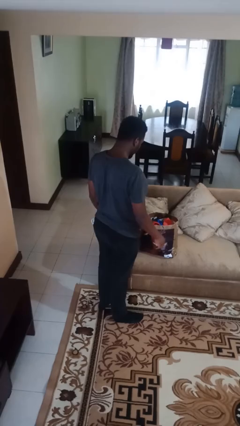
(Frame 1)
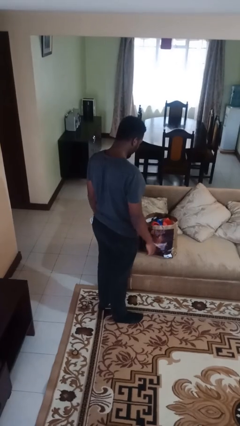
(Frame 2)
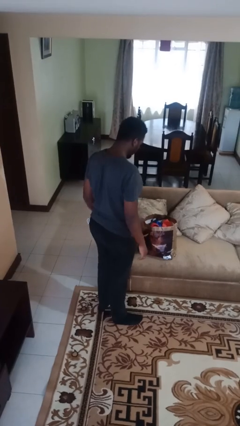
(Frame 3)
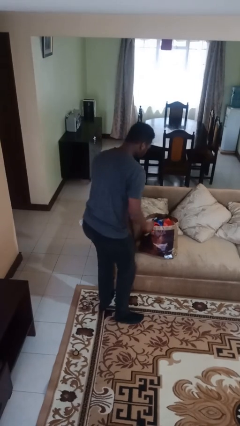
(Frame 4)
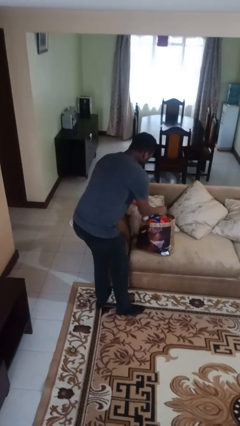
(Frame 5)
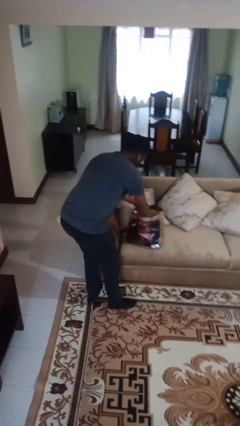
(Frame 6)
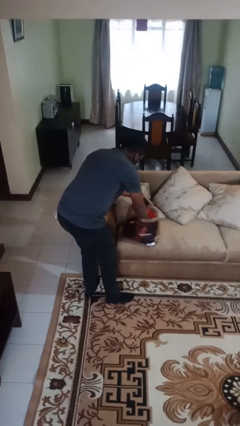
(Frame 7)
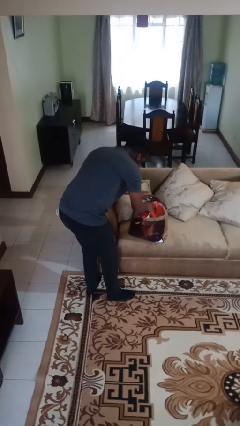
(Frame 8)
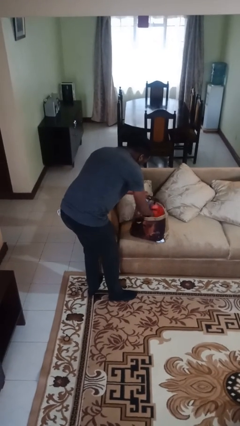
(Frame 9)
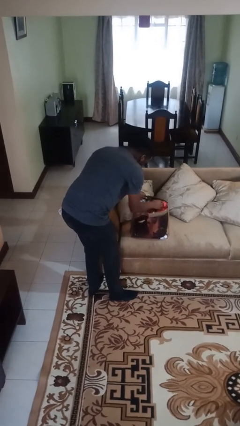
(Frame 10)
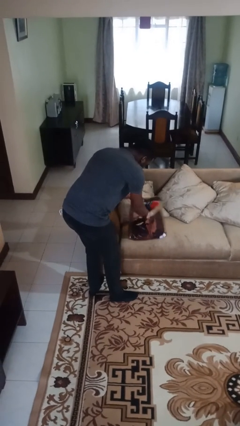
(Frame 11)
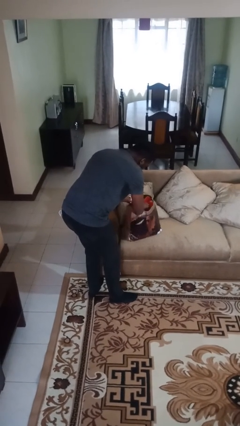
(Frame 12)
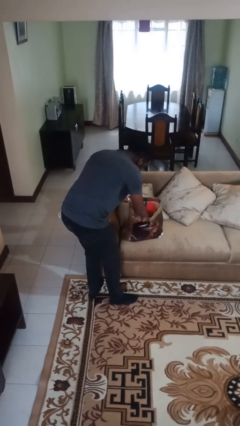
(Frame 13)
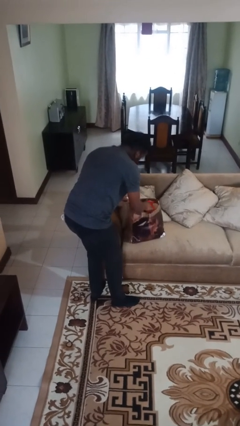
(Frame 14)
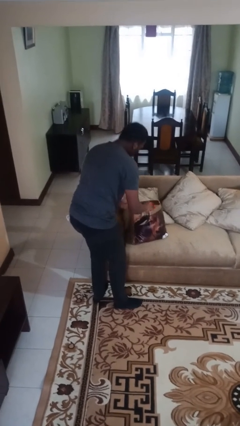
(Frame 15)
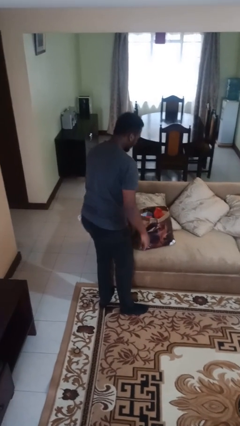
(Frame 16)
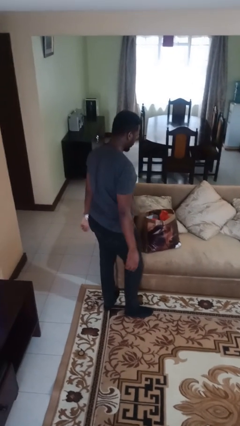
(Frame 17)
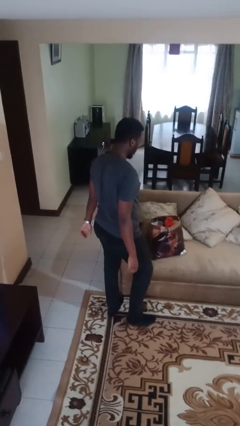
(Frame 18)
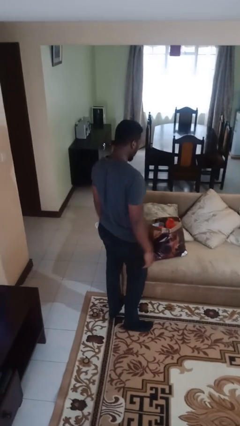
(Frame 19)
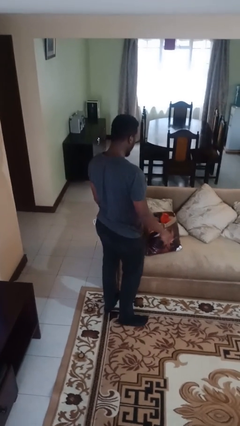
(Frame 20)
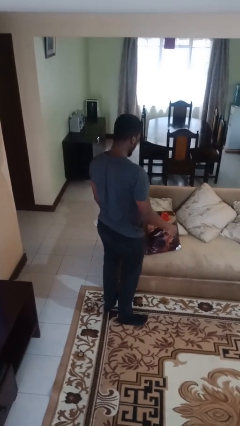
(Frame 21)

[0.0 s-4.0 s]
person searches in bag

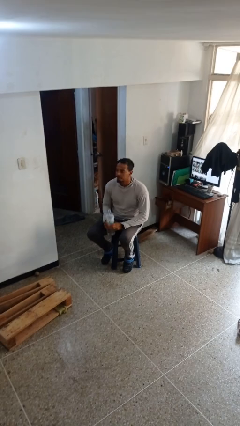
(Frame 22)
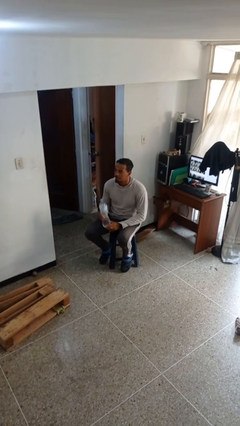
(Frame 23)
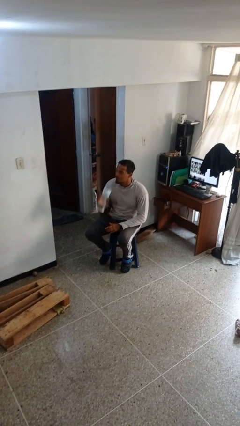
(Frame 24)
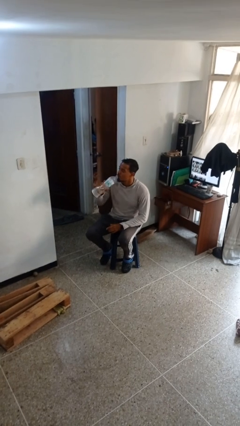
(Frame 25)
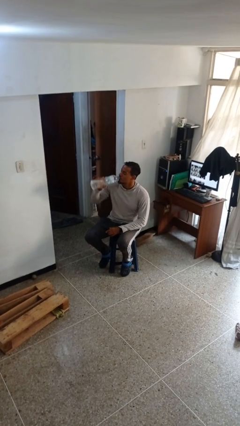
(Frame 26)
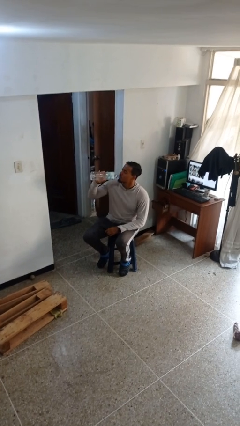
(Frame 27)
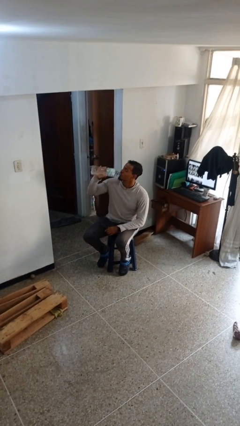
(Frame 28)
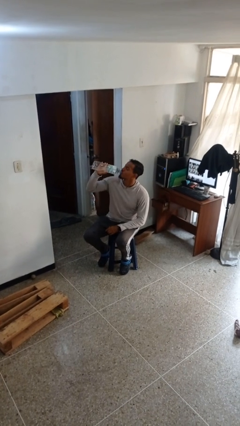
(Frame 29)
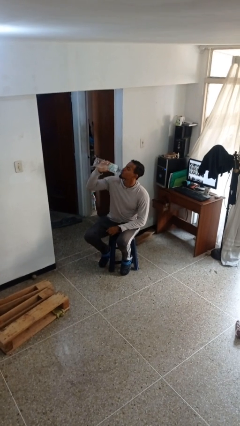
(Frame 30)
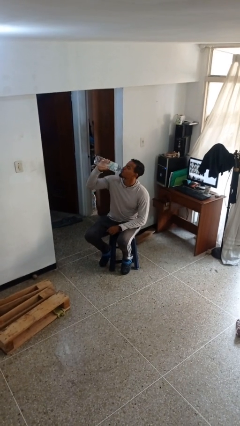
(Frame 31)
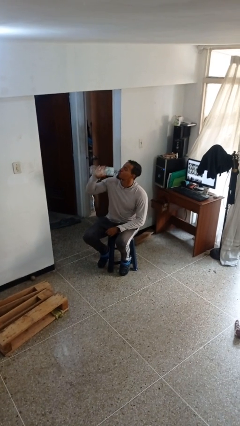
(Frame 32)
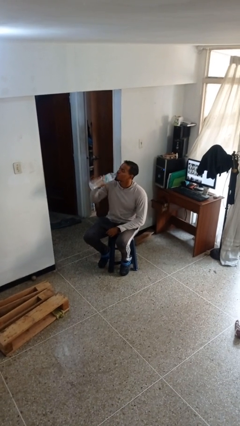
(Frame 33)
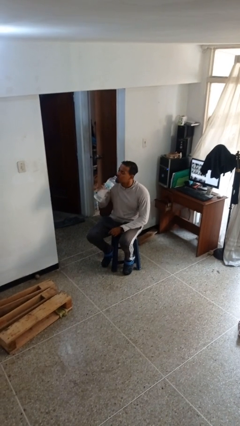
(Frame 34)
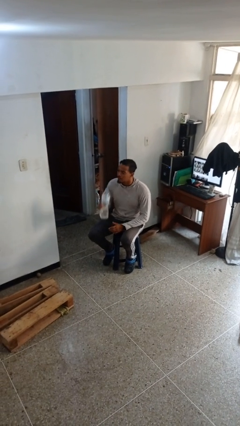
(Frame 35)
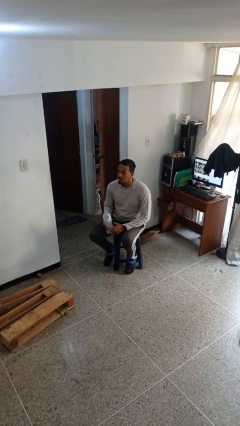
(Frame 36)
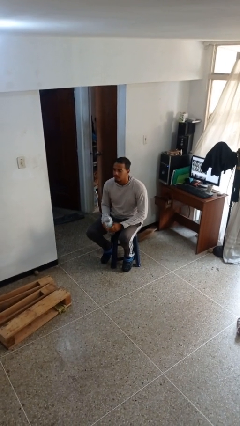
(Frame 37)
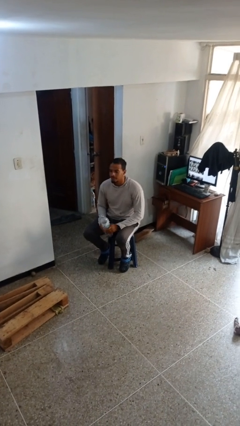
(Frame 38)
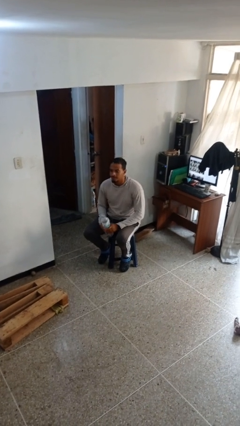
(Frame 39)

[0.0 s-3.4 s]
person drinks from bottle

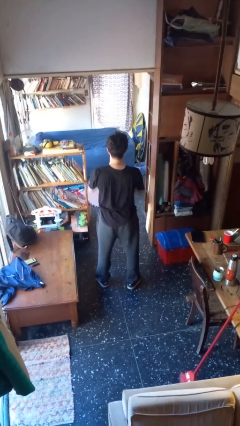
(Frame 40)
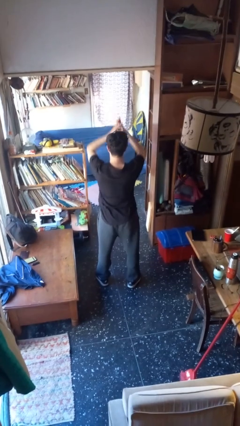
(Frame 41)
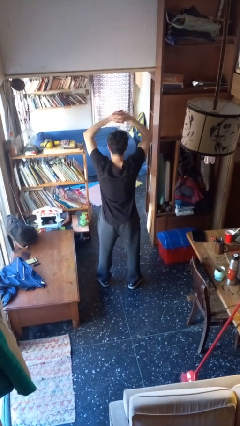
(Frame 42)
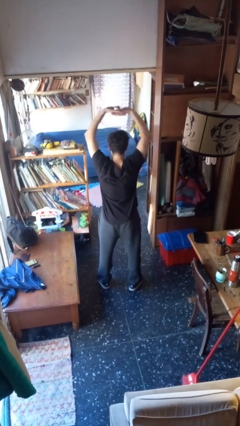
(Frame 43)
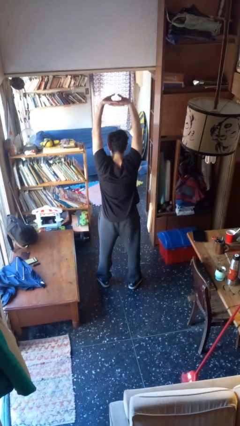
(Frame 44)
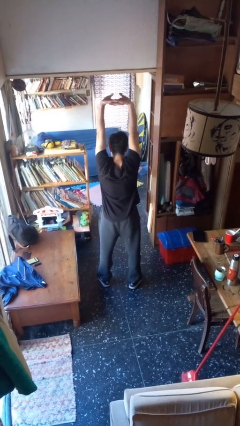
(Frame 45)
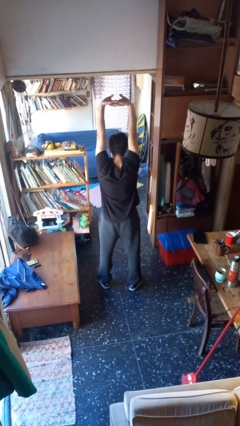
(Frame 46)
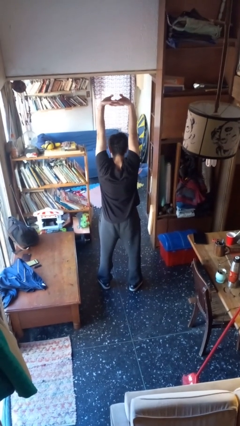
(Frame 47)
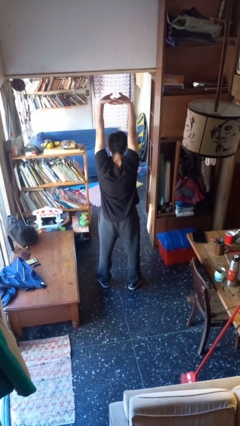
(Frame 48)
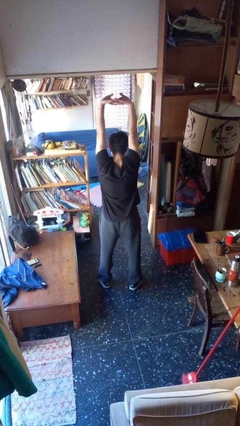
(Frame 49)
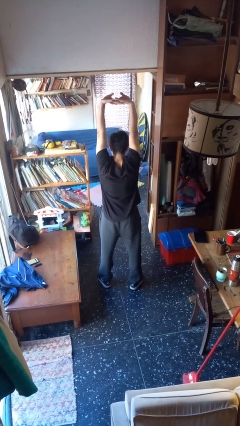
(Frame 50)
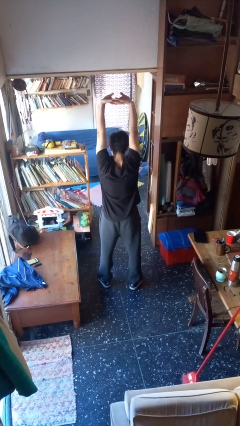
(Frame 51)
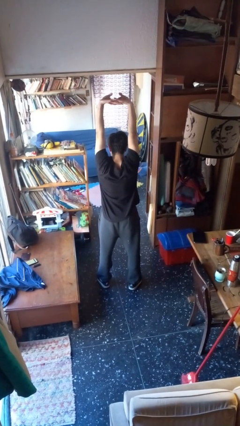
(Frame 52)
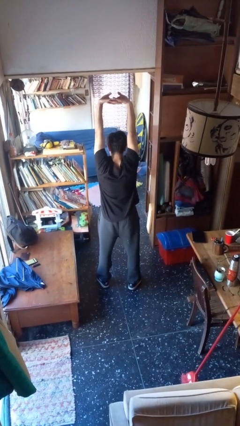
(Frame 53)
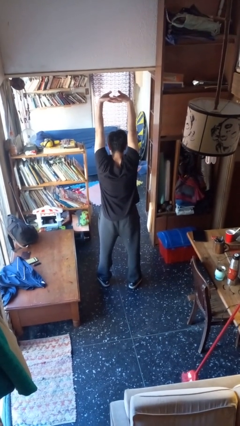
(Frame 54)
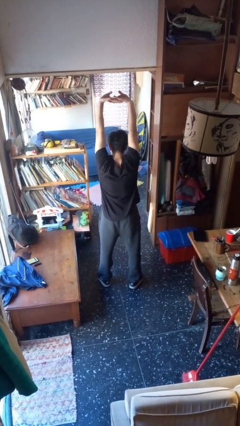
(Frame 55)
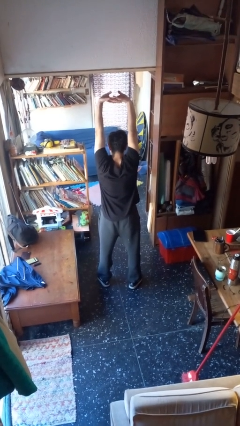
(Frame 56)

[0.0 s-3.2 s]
person stretches arms over head

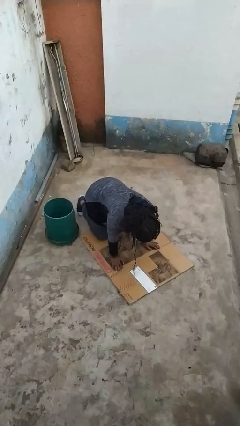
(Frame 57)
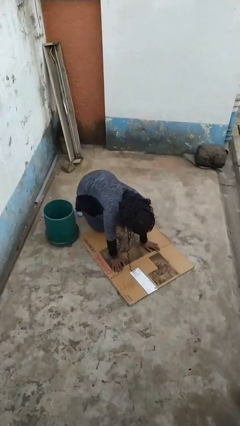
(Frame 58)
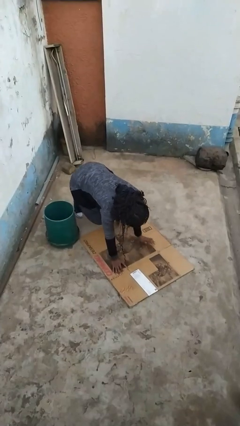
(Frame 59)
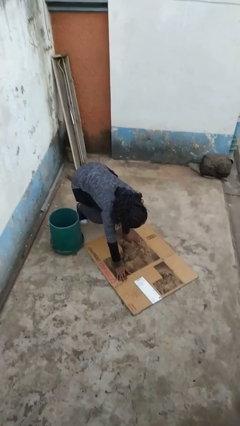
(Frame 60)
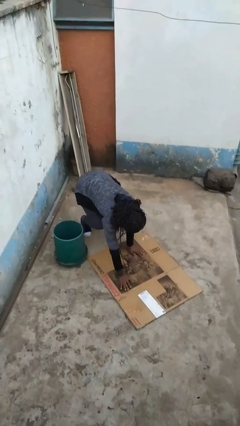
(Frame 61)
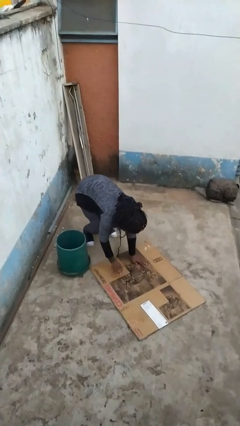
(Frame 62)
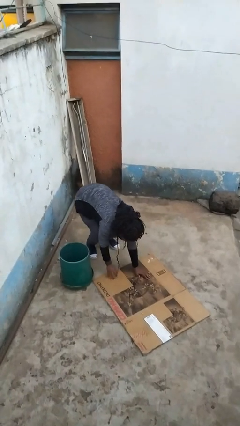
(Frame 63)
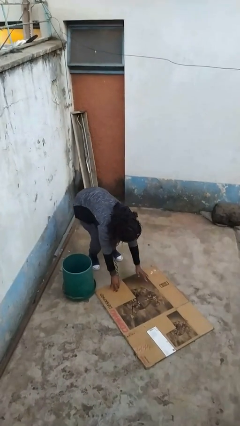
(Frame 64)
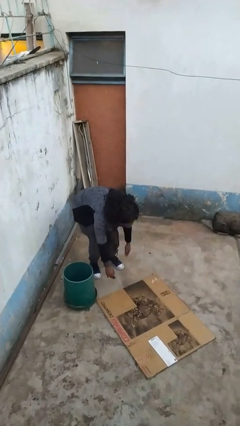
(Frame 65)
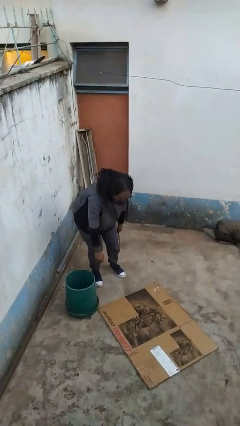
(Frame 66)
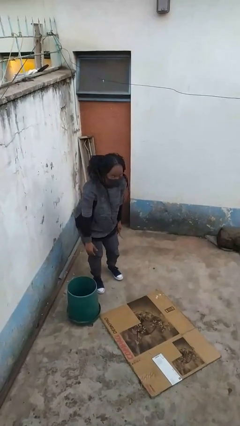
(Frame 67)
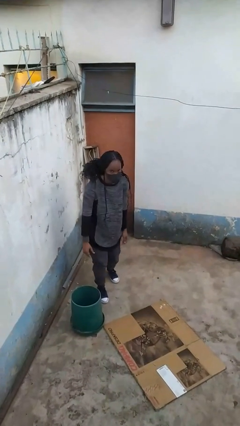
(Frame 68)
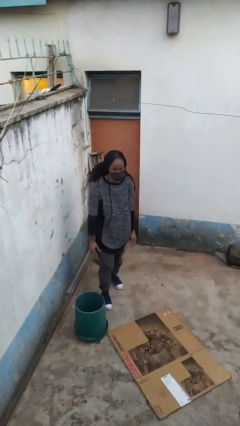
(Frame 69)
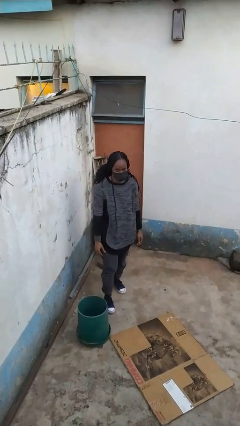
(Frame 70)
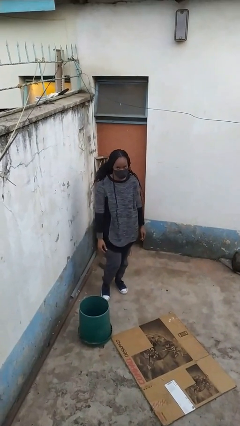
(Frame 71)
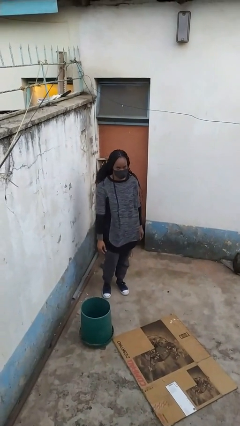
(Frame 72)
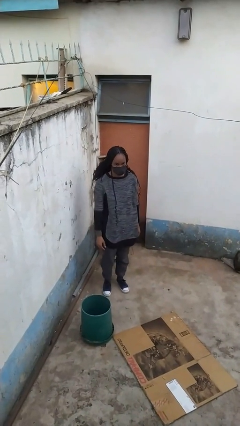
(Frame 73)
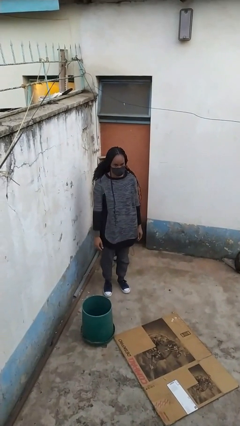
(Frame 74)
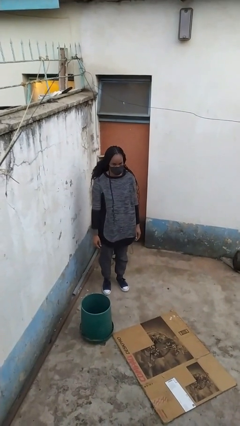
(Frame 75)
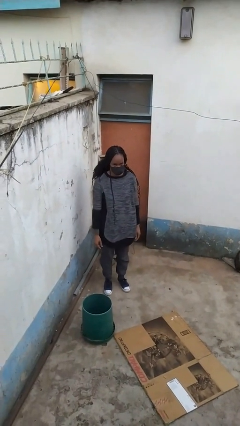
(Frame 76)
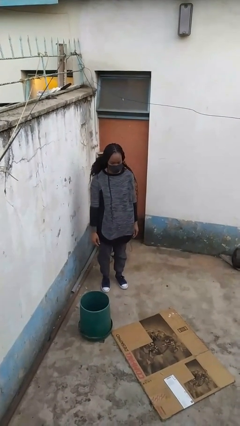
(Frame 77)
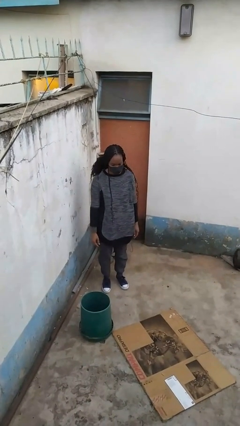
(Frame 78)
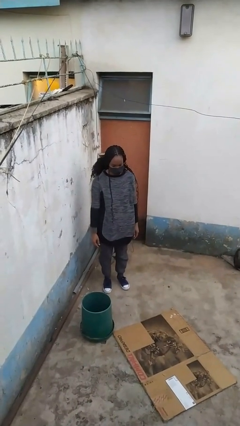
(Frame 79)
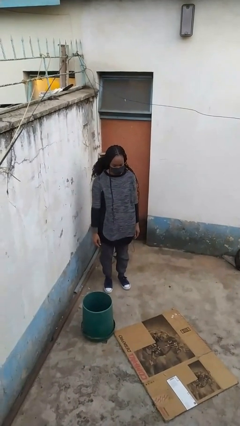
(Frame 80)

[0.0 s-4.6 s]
person stands up from floor

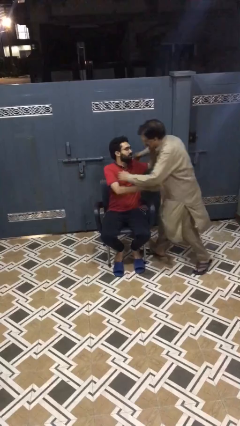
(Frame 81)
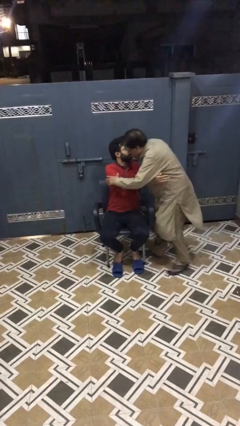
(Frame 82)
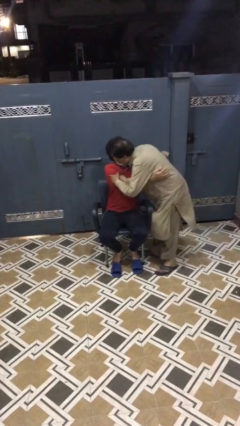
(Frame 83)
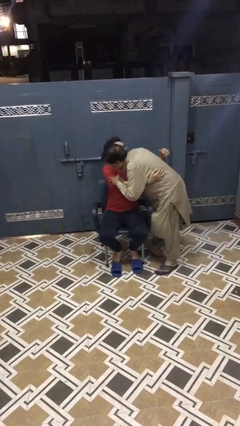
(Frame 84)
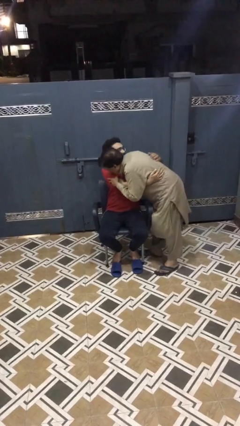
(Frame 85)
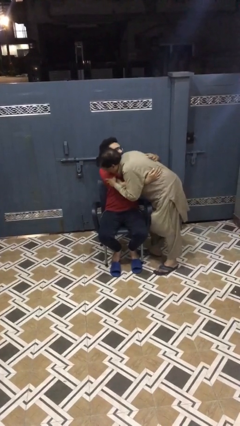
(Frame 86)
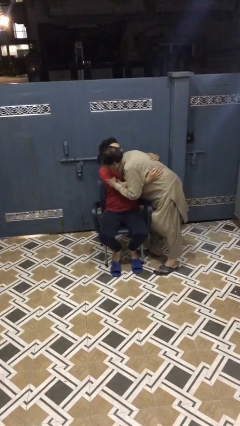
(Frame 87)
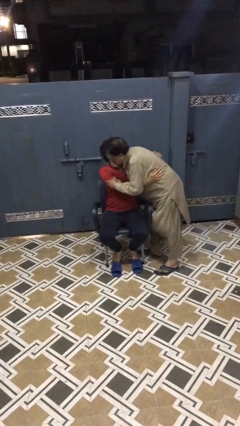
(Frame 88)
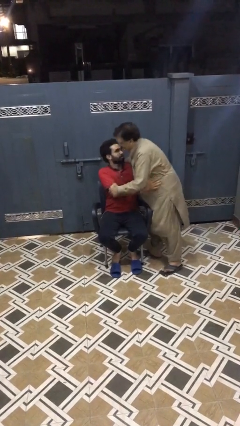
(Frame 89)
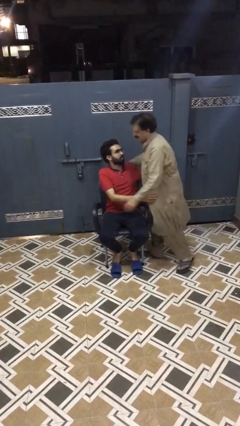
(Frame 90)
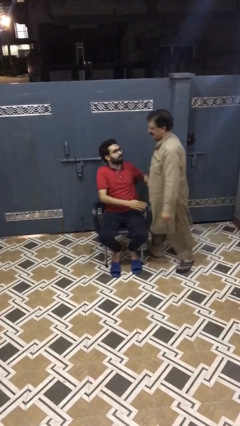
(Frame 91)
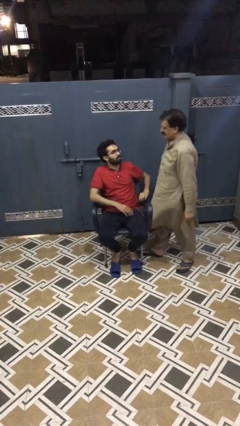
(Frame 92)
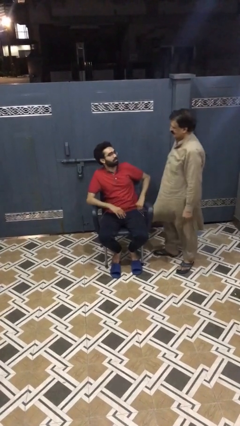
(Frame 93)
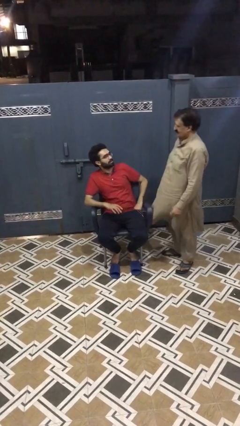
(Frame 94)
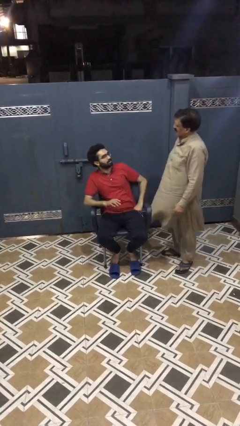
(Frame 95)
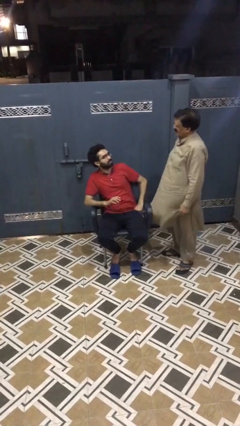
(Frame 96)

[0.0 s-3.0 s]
person embraces person
